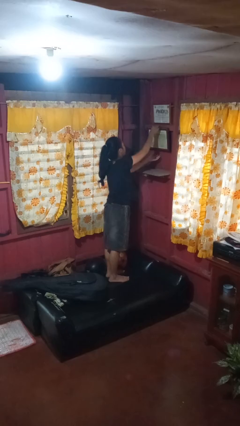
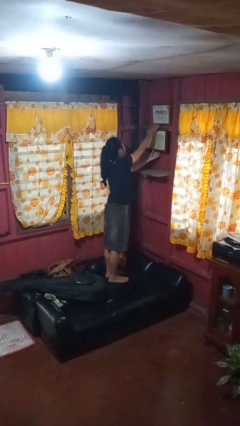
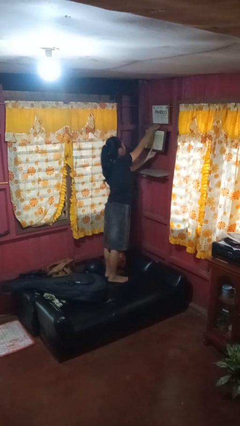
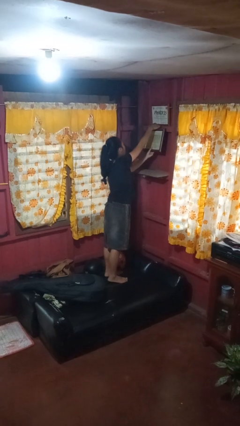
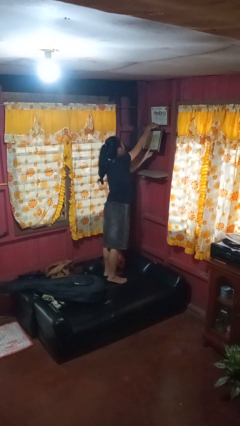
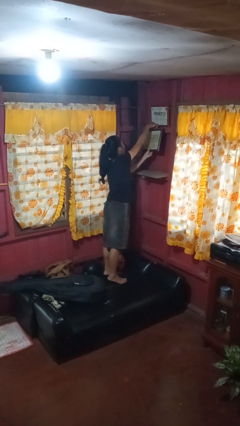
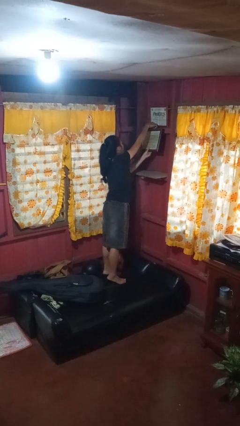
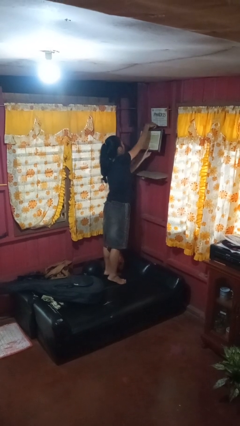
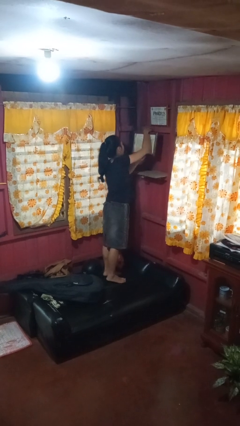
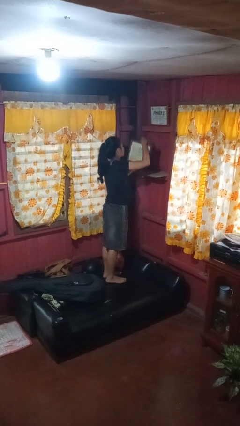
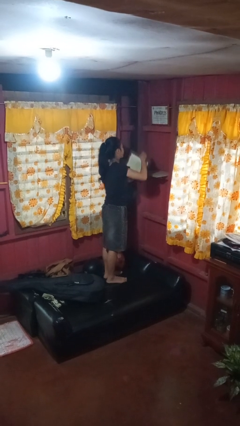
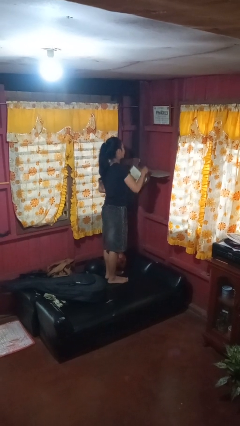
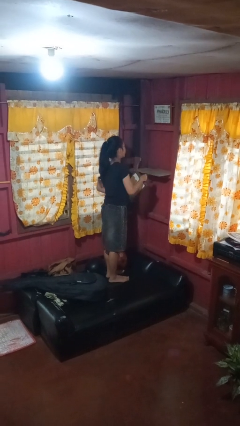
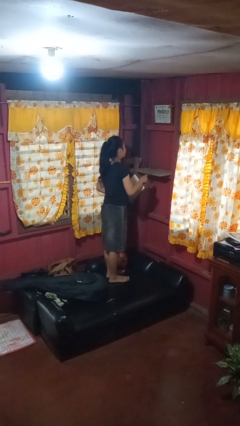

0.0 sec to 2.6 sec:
person takes down picture frame

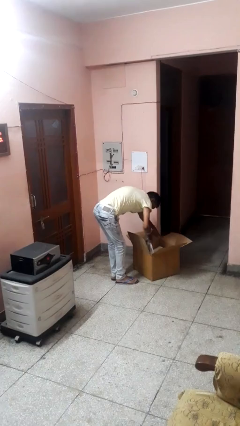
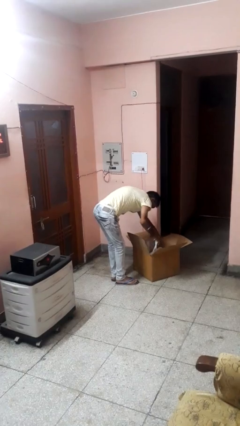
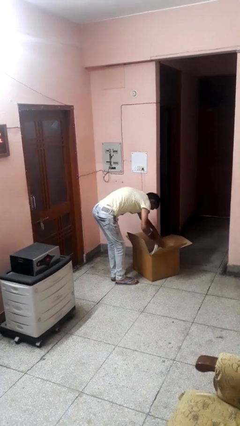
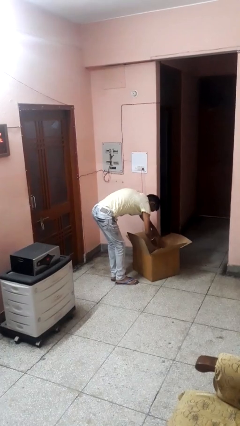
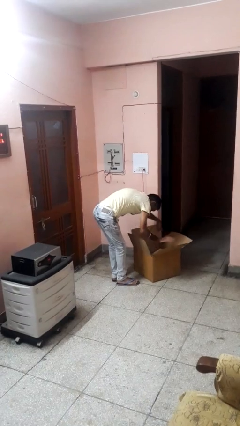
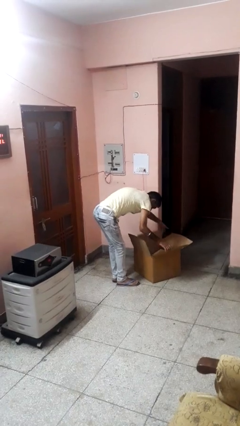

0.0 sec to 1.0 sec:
person searches in box

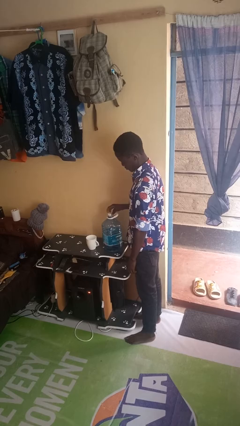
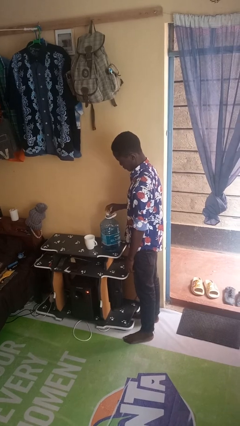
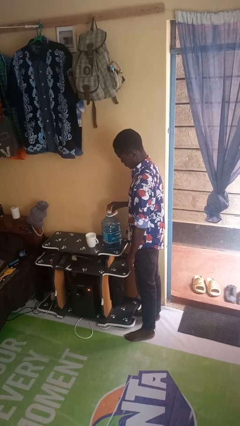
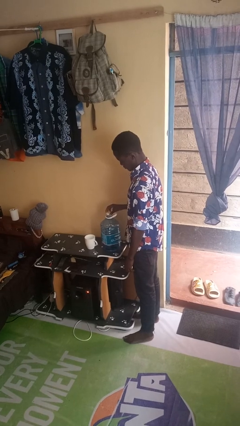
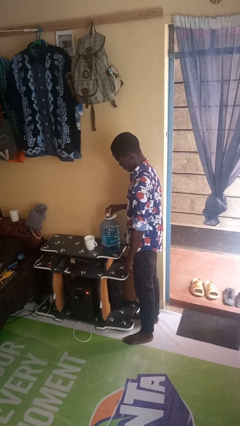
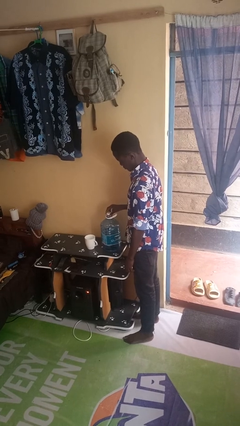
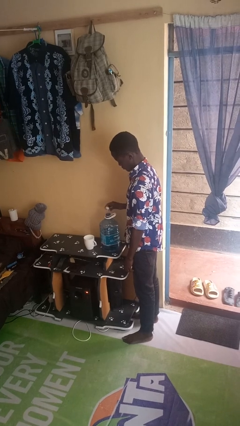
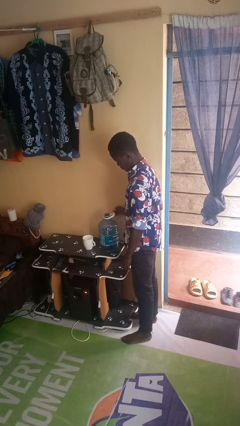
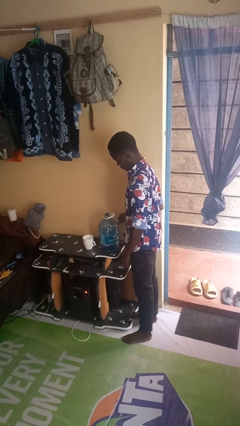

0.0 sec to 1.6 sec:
person unscrews lid from bottle

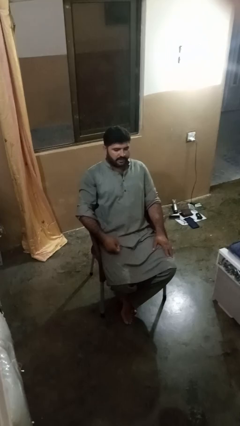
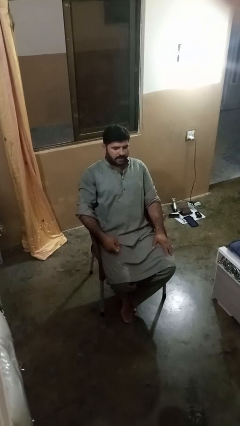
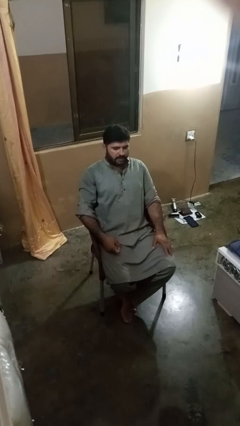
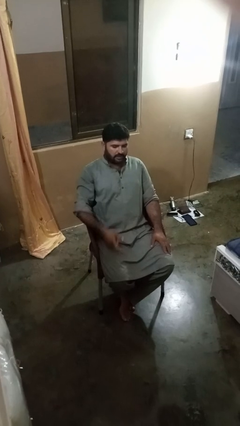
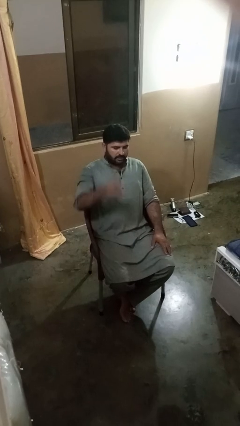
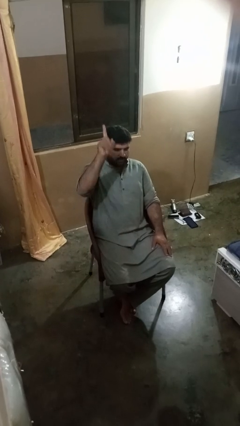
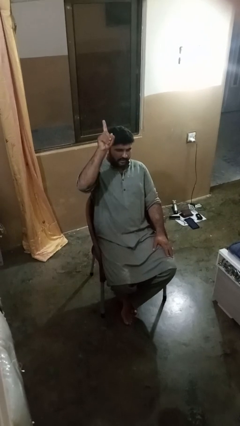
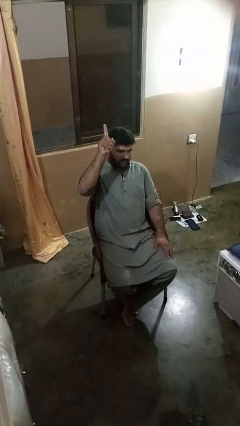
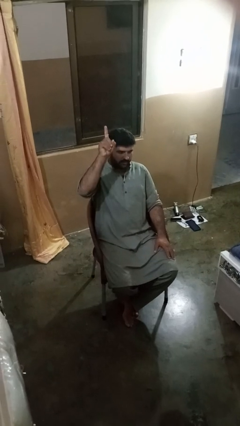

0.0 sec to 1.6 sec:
person gestures number one

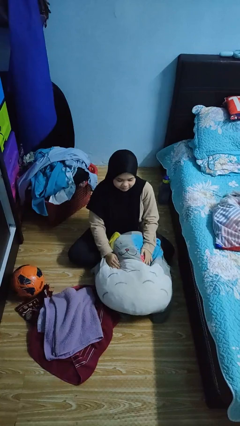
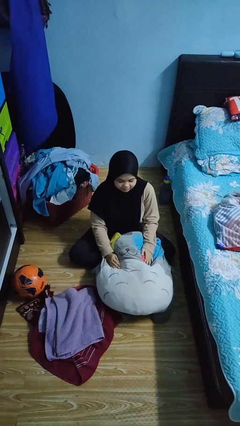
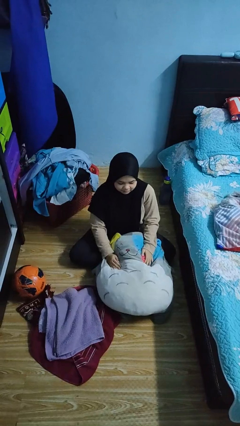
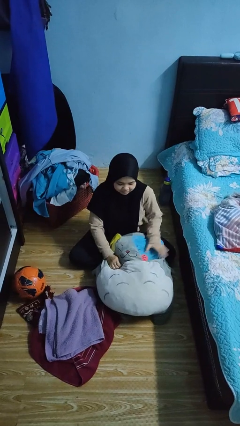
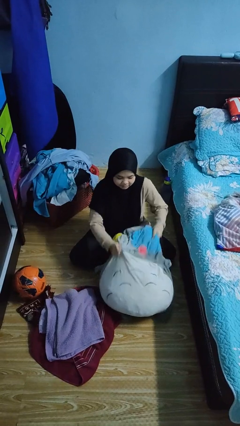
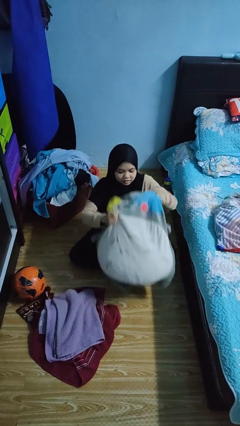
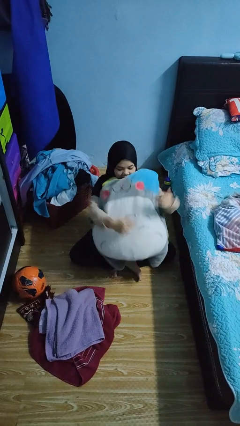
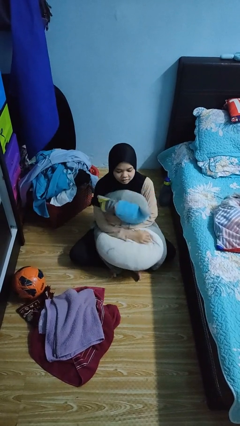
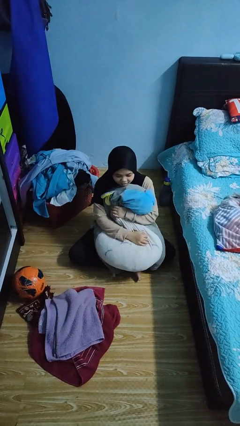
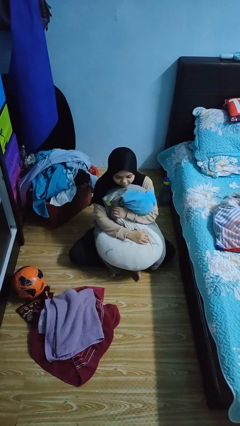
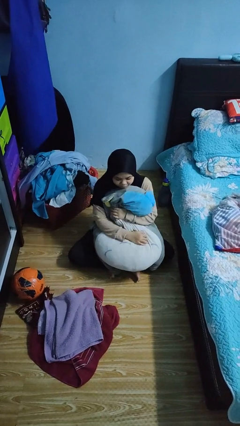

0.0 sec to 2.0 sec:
person hugs stuffed animal

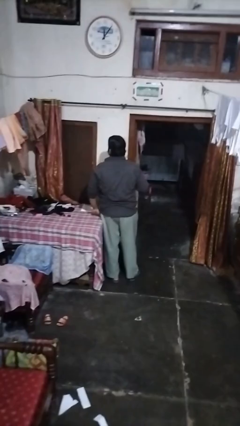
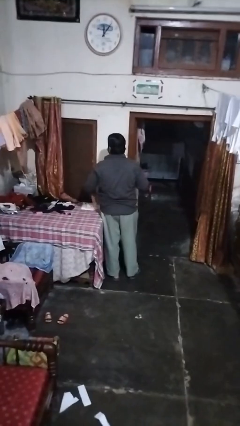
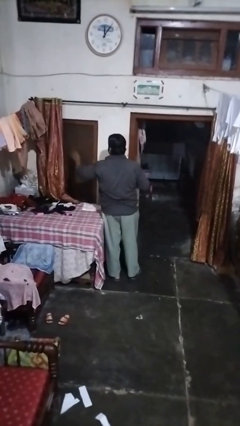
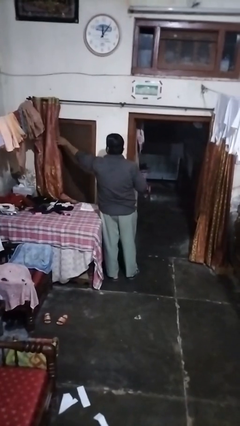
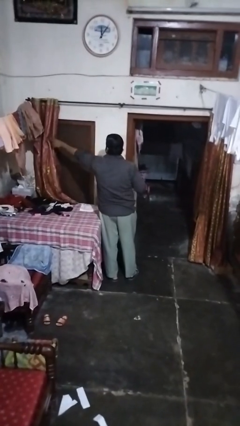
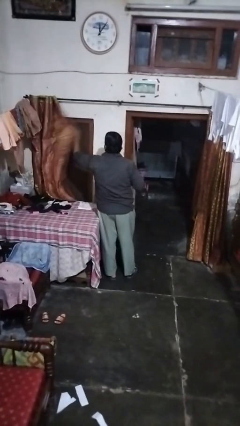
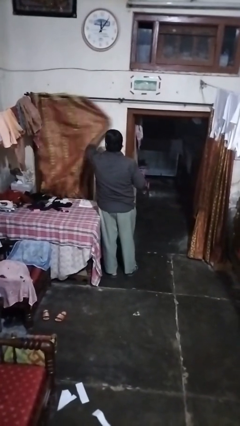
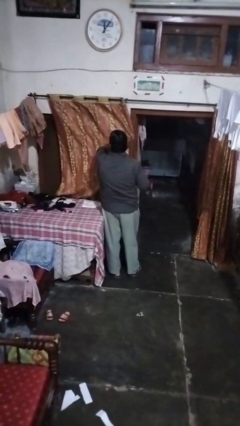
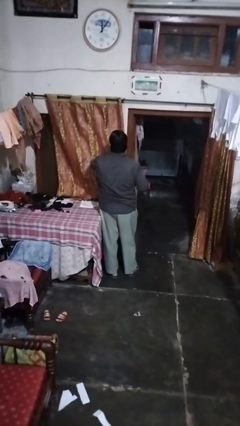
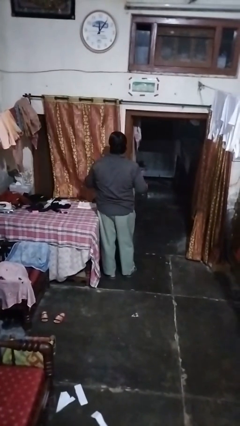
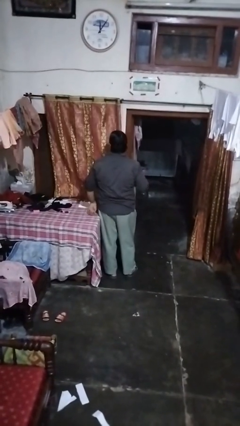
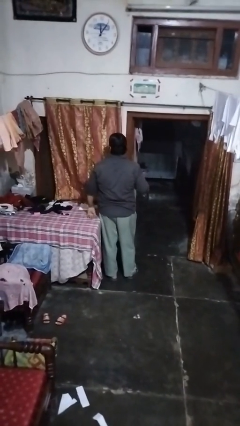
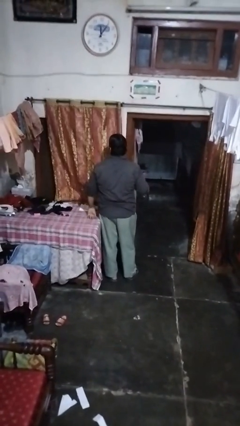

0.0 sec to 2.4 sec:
person closes curtains

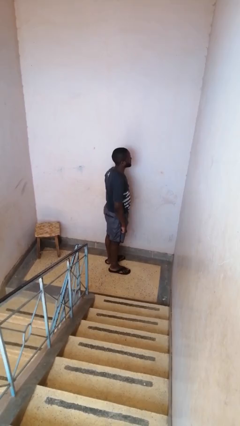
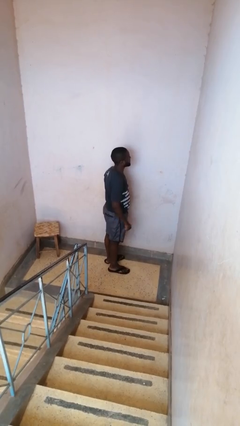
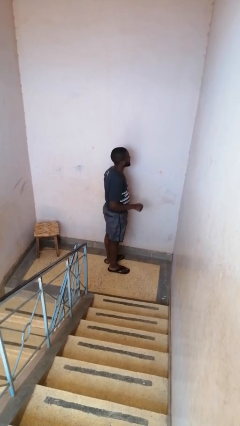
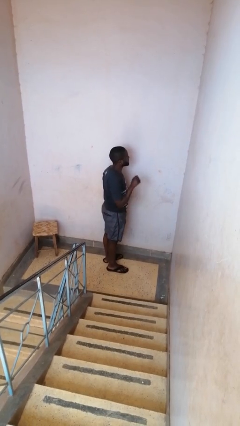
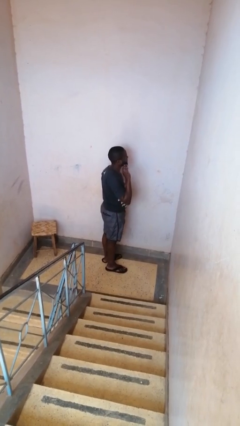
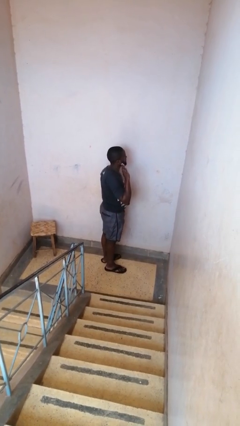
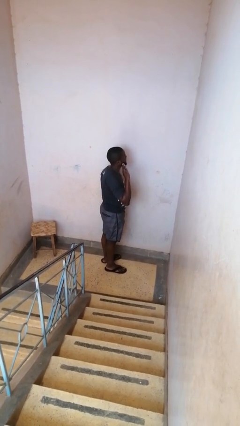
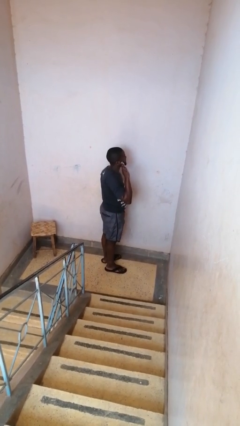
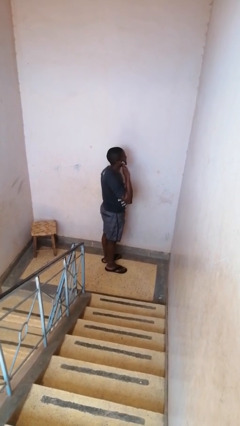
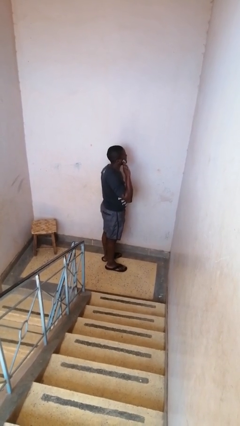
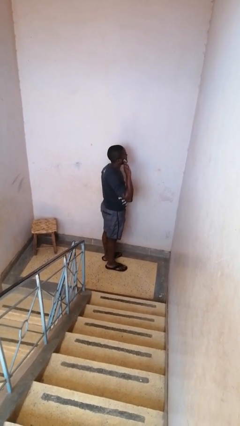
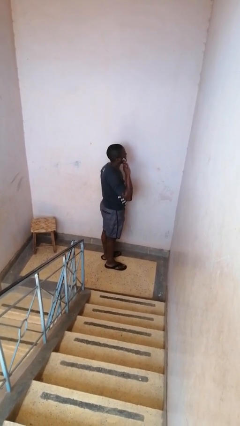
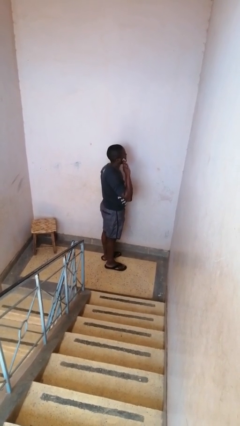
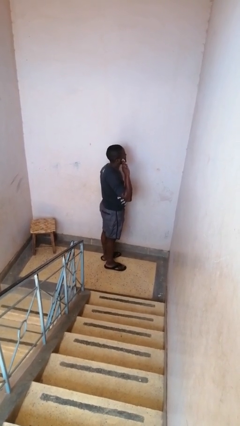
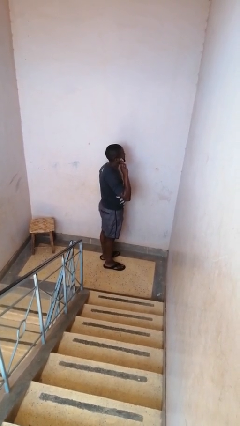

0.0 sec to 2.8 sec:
person salutes

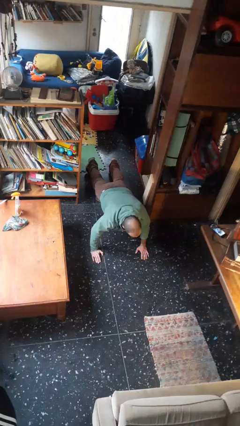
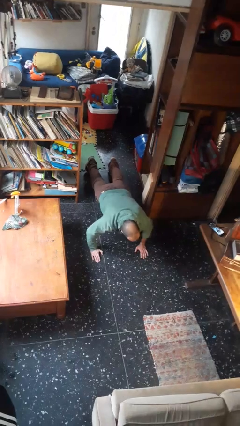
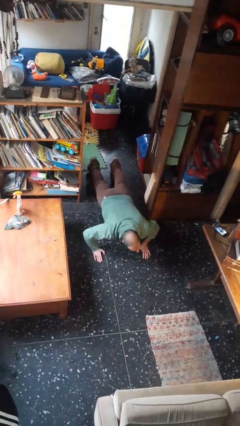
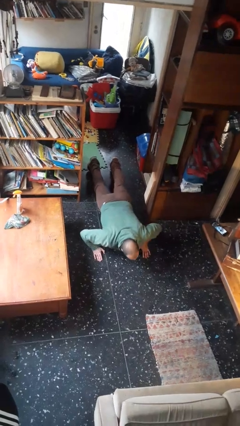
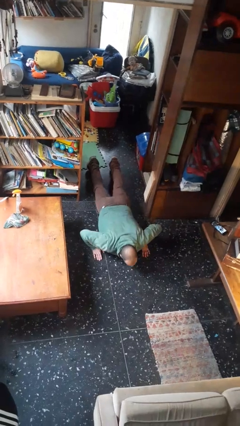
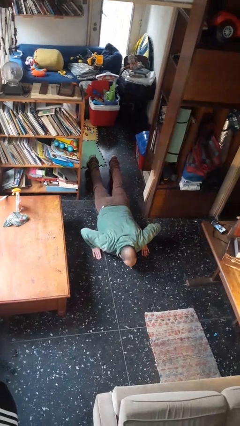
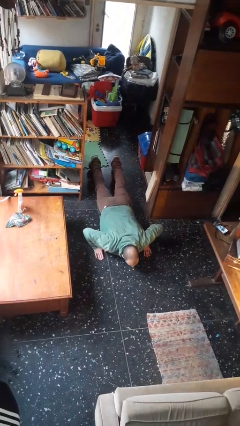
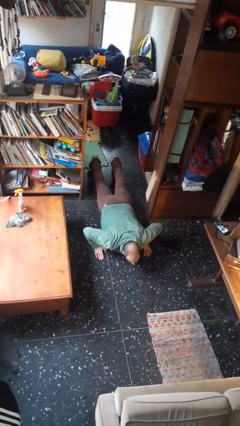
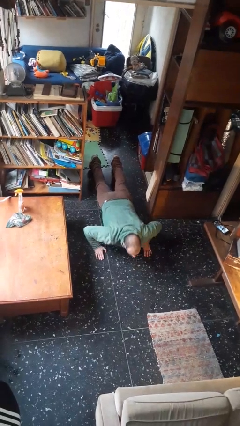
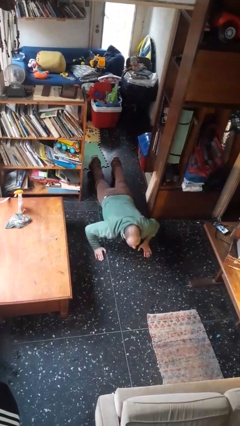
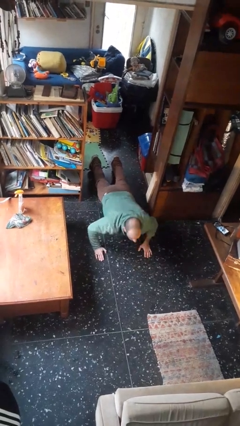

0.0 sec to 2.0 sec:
person exercises with pushup

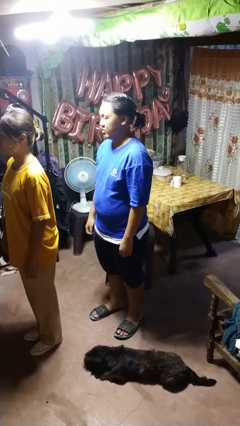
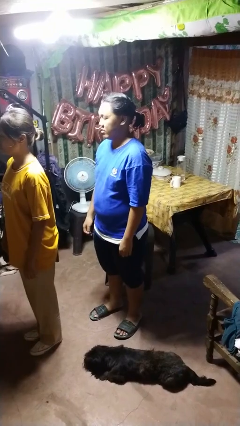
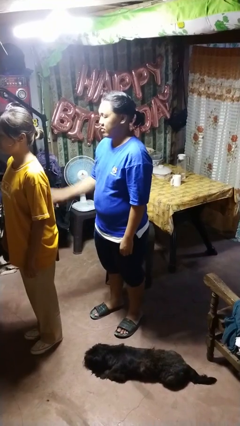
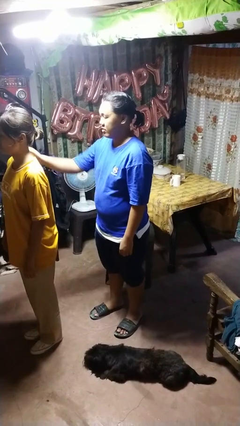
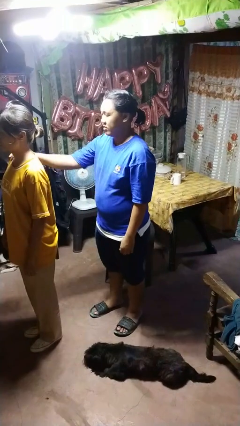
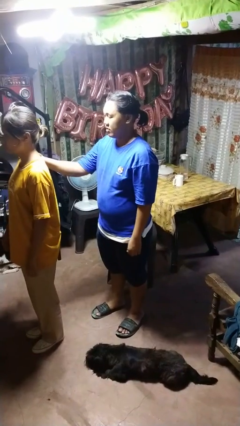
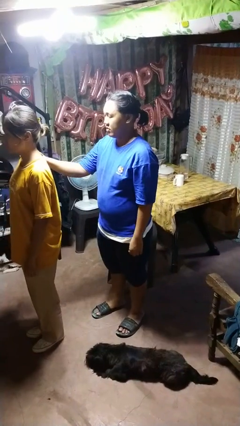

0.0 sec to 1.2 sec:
person grabs person by shoulder
